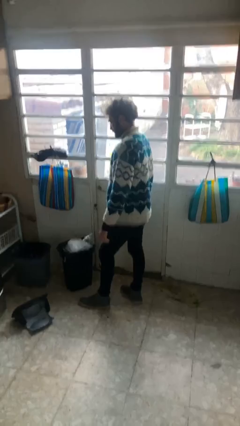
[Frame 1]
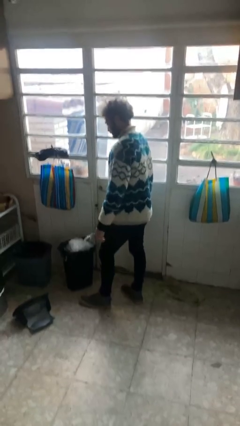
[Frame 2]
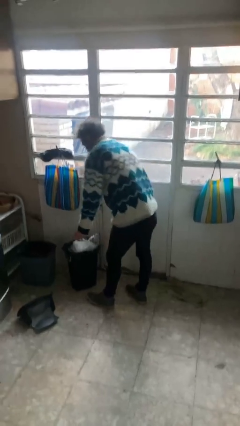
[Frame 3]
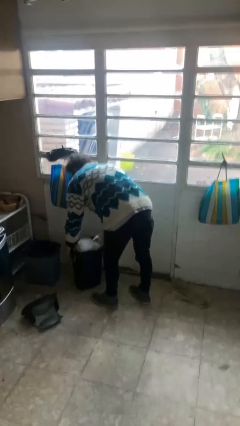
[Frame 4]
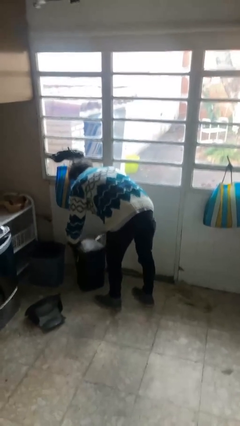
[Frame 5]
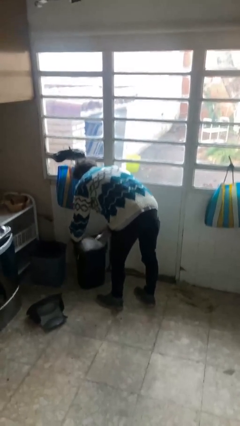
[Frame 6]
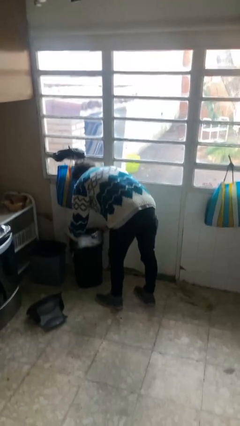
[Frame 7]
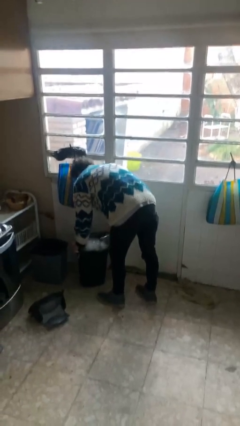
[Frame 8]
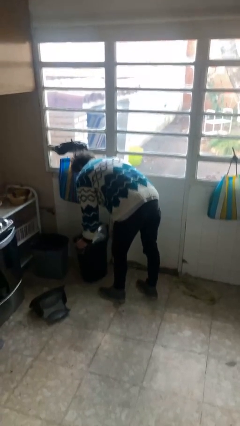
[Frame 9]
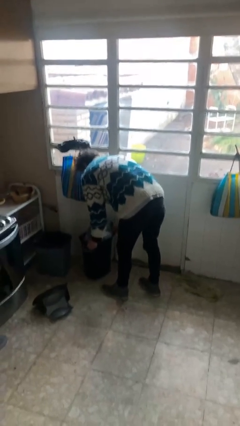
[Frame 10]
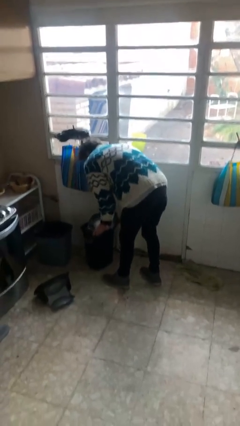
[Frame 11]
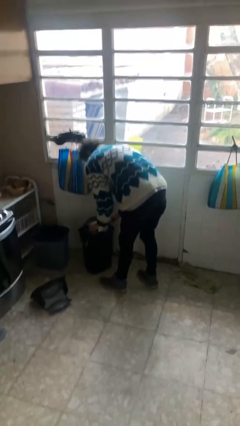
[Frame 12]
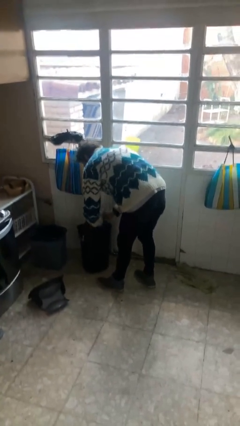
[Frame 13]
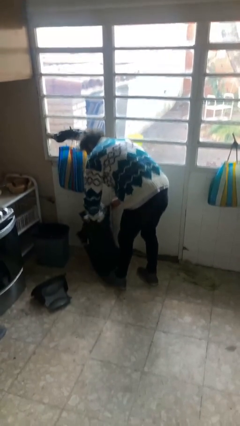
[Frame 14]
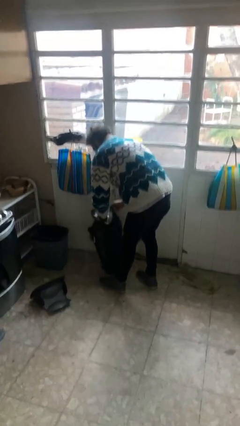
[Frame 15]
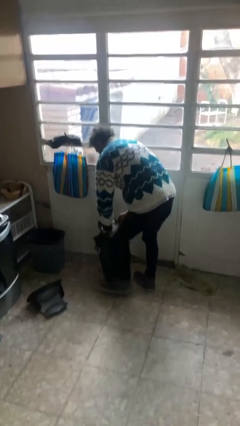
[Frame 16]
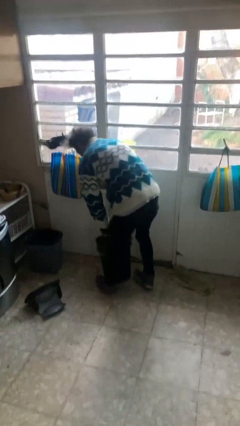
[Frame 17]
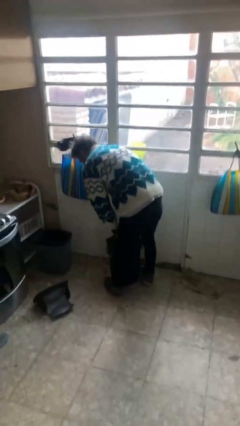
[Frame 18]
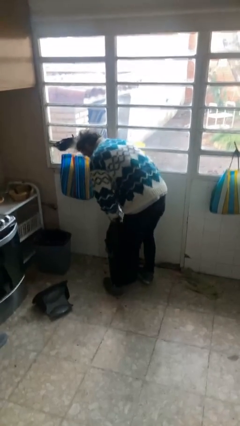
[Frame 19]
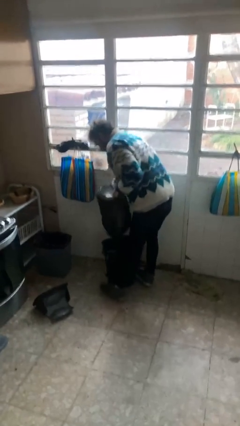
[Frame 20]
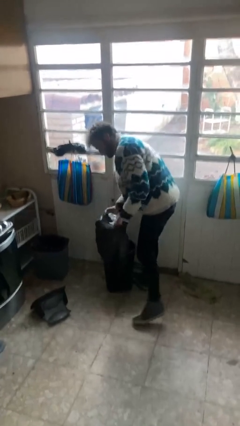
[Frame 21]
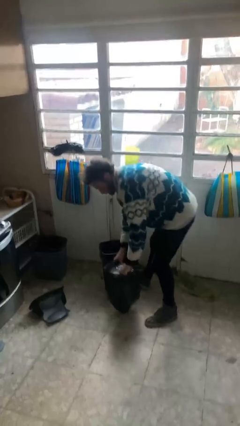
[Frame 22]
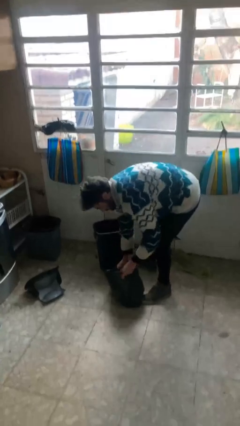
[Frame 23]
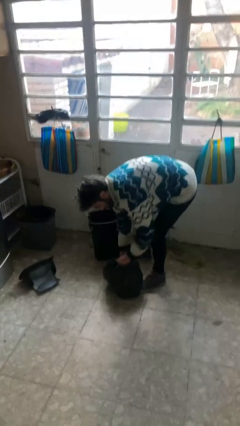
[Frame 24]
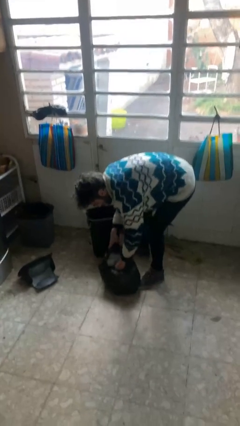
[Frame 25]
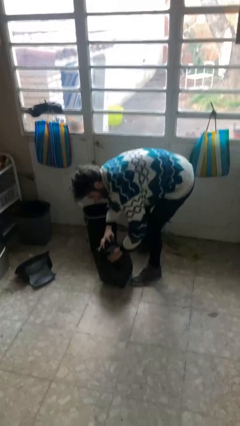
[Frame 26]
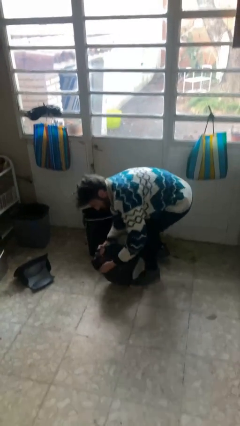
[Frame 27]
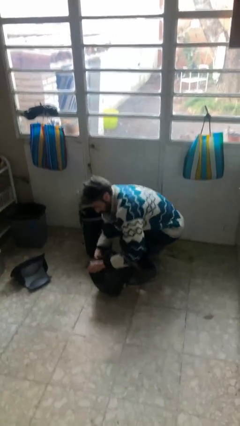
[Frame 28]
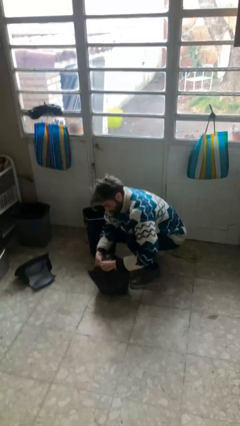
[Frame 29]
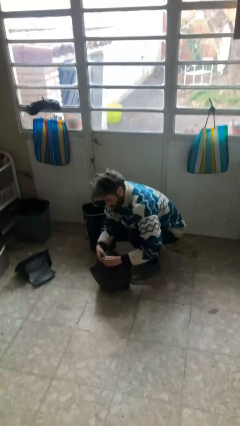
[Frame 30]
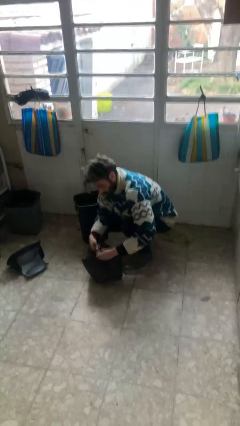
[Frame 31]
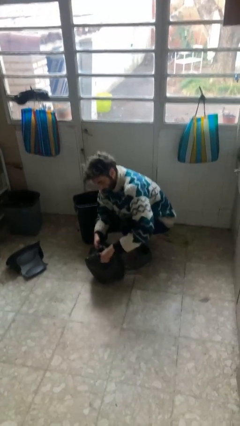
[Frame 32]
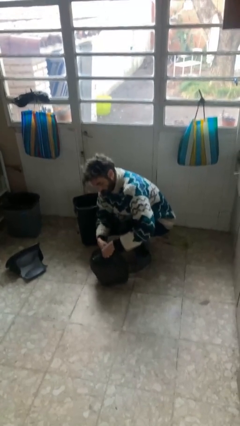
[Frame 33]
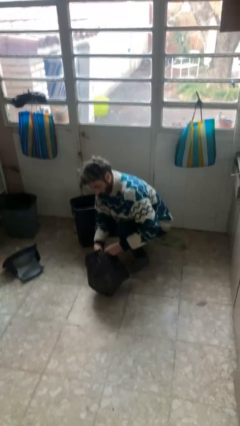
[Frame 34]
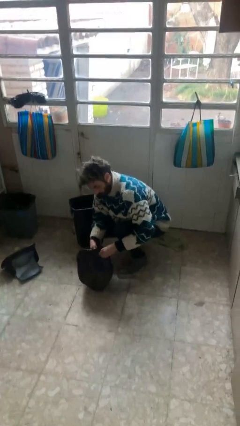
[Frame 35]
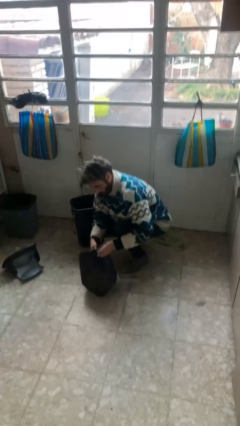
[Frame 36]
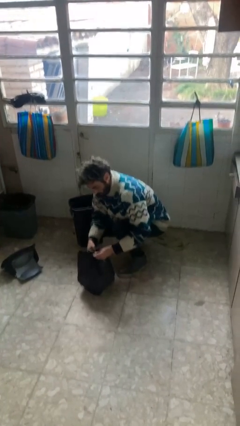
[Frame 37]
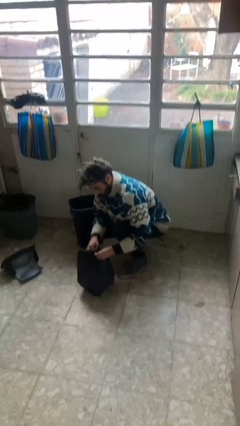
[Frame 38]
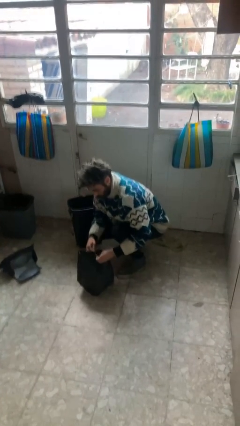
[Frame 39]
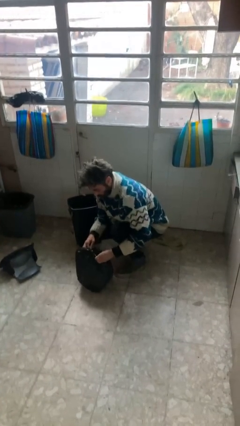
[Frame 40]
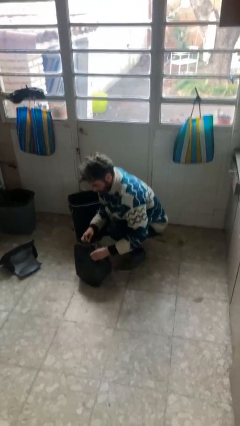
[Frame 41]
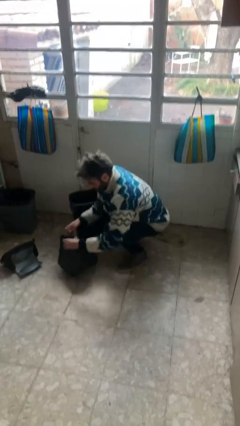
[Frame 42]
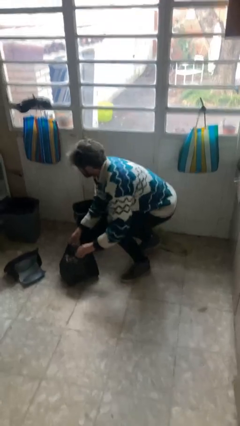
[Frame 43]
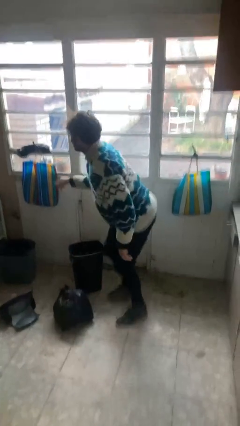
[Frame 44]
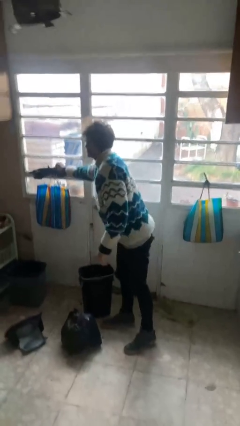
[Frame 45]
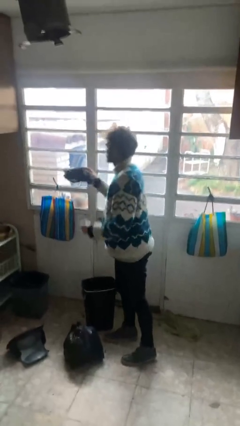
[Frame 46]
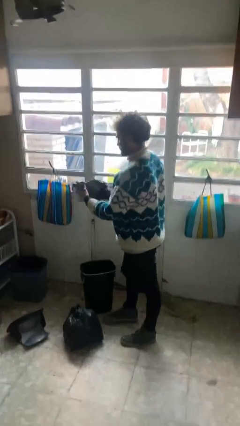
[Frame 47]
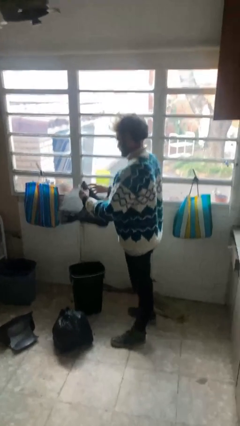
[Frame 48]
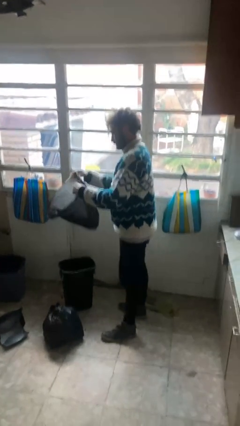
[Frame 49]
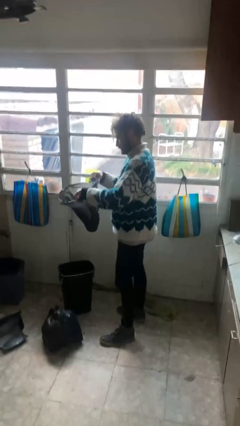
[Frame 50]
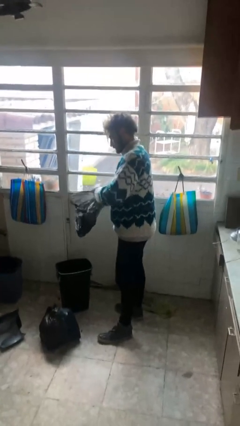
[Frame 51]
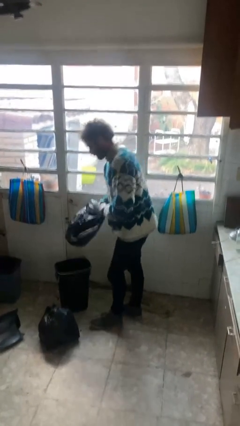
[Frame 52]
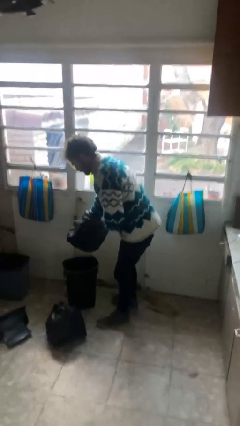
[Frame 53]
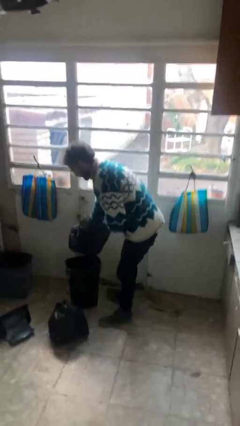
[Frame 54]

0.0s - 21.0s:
person removes trashbag from trashcan

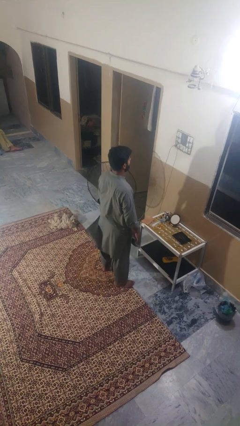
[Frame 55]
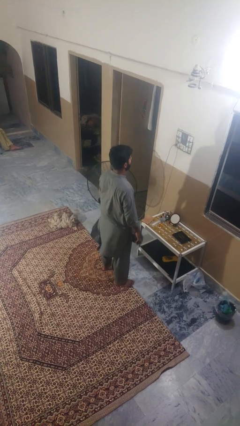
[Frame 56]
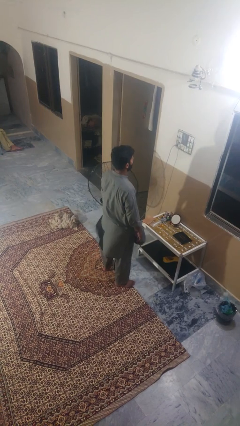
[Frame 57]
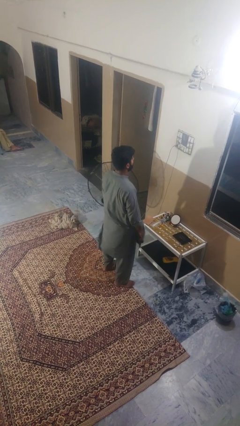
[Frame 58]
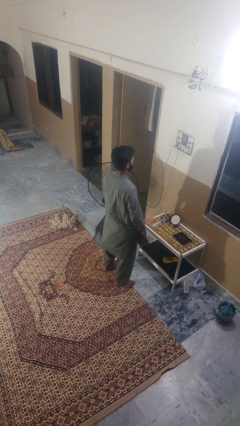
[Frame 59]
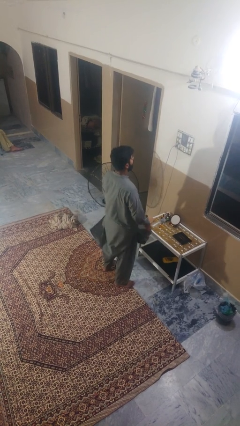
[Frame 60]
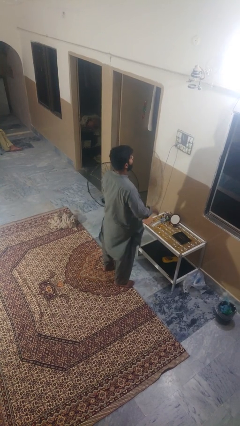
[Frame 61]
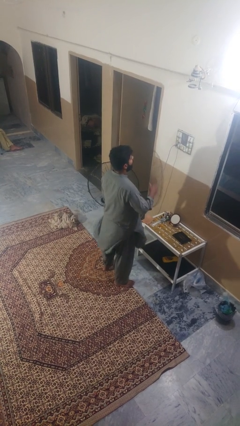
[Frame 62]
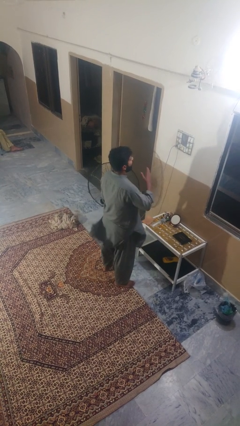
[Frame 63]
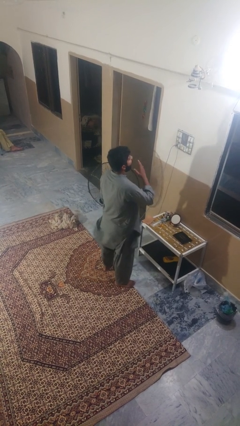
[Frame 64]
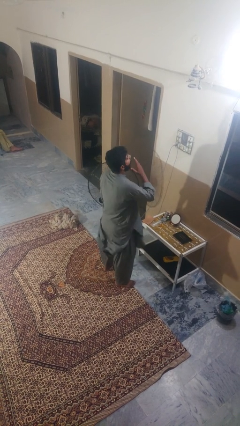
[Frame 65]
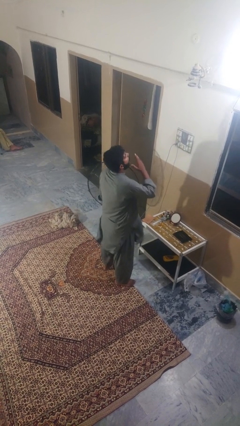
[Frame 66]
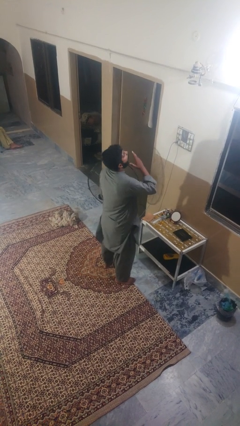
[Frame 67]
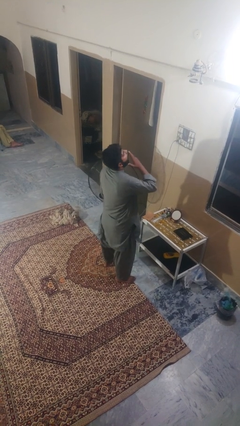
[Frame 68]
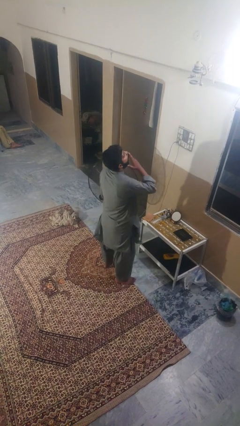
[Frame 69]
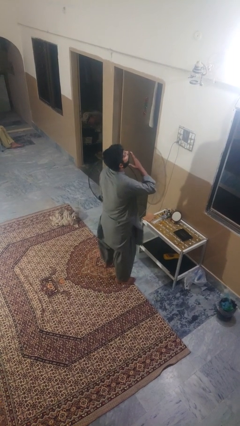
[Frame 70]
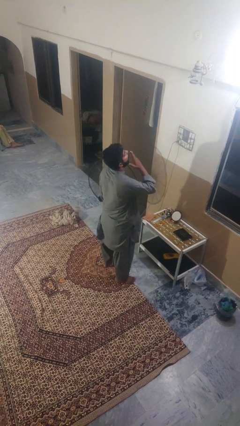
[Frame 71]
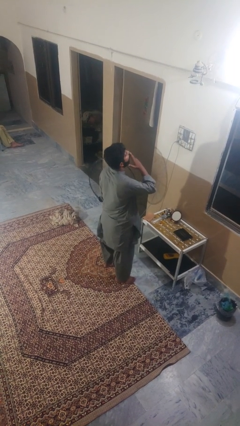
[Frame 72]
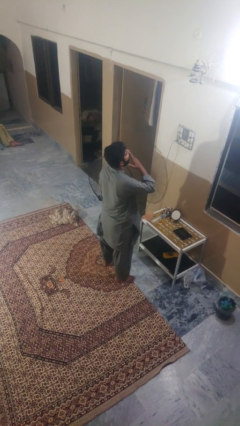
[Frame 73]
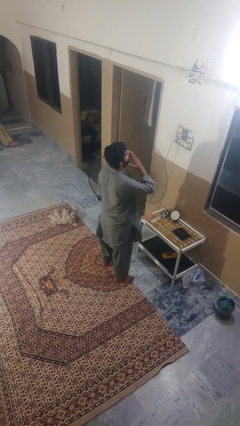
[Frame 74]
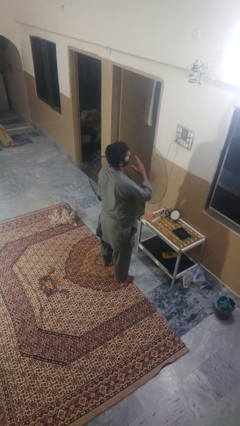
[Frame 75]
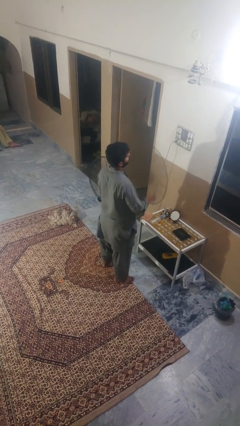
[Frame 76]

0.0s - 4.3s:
person yawns

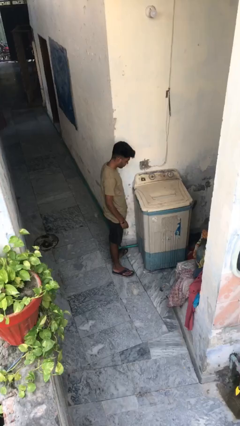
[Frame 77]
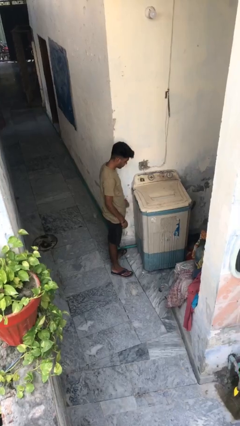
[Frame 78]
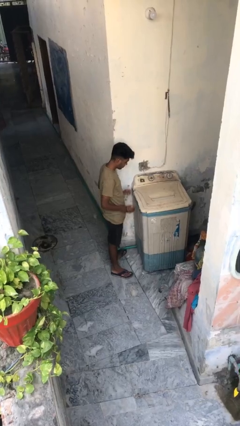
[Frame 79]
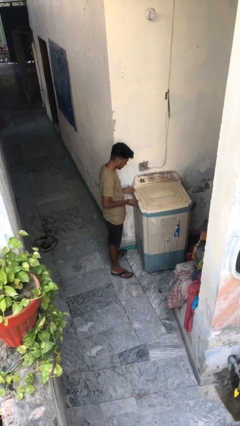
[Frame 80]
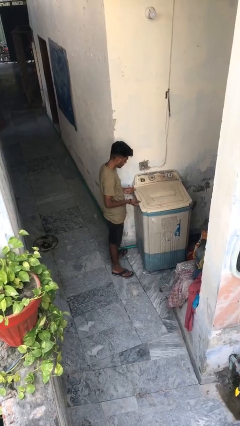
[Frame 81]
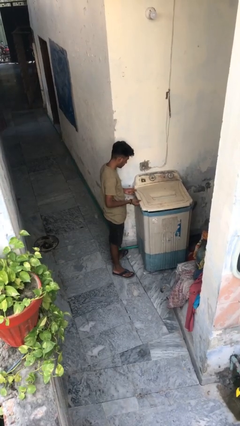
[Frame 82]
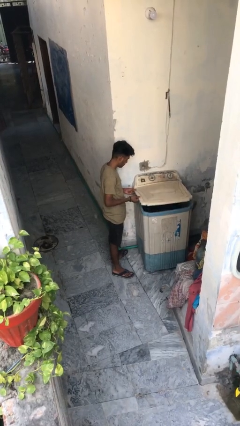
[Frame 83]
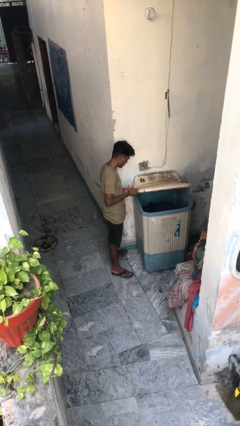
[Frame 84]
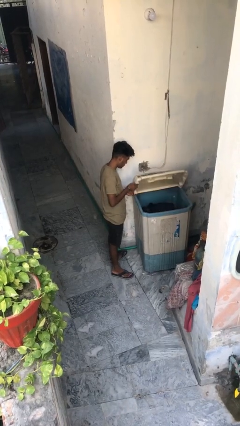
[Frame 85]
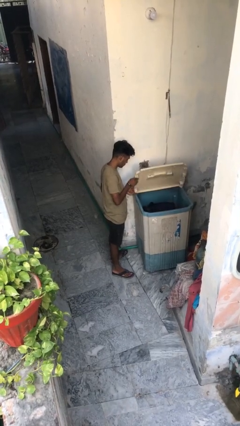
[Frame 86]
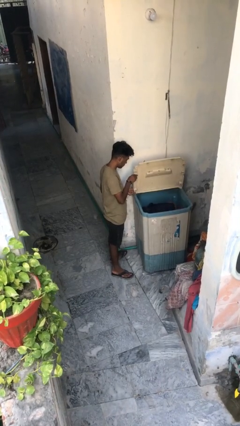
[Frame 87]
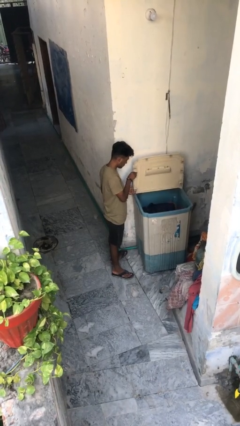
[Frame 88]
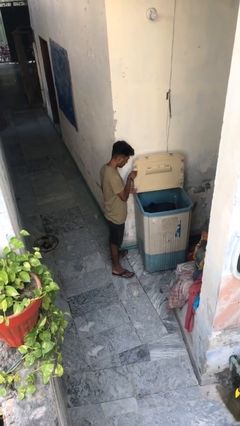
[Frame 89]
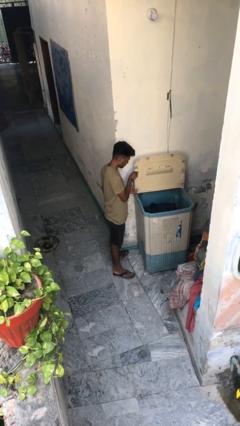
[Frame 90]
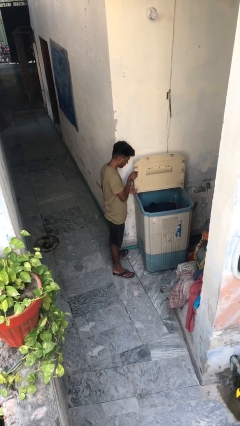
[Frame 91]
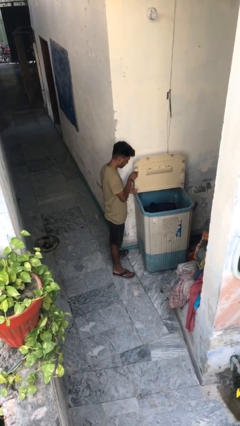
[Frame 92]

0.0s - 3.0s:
person opens clothes washer
